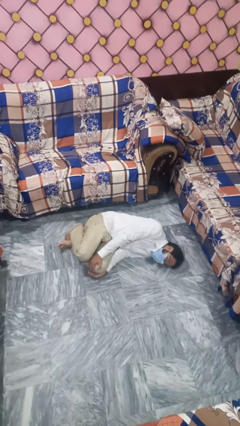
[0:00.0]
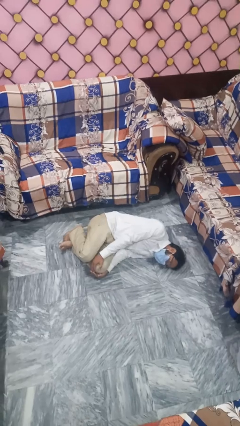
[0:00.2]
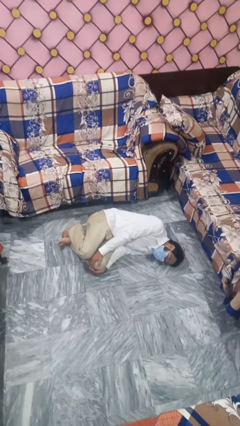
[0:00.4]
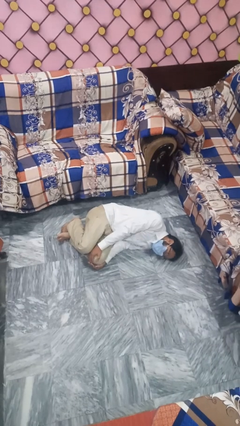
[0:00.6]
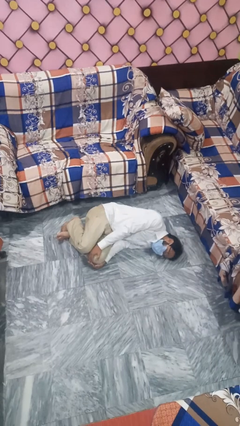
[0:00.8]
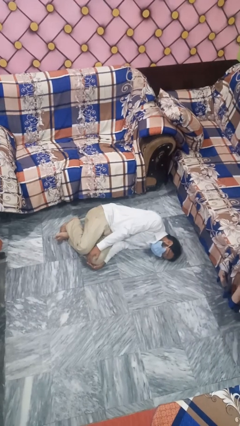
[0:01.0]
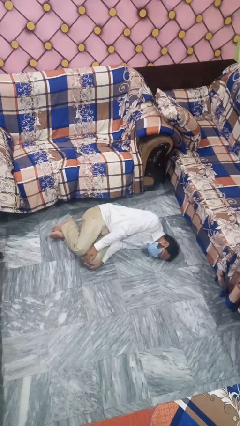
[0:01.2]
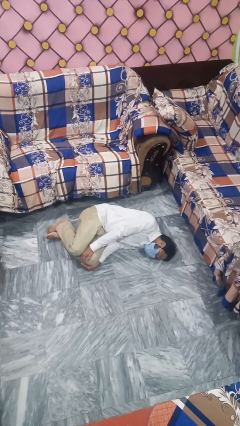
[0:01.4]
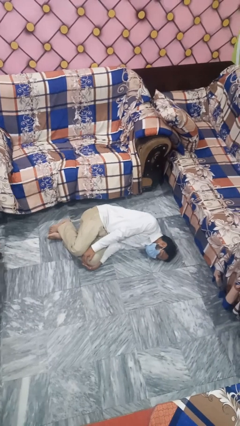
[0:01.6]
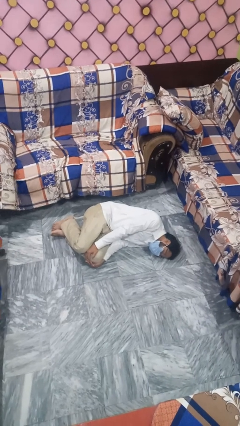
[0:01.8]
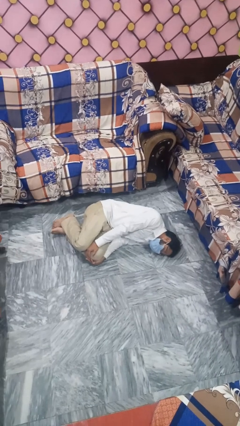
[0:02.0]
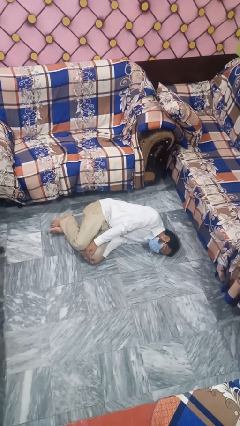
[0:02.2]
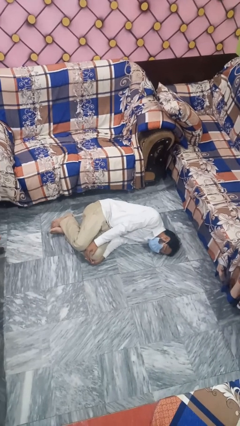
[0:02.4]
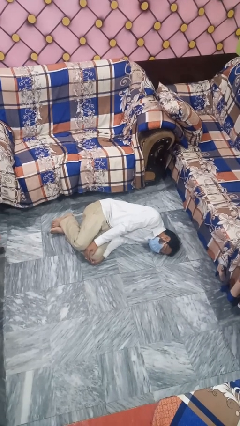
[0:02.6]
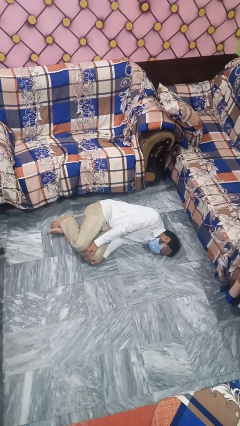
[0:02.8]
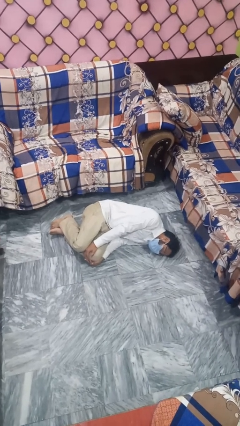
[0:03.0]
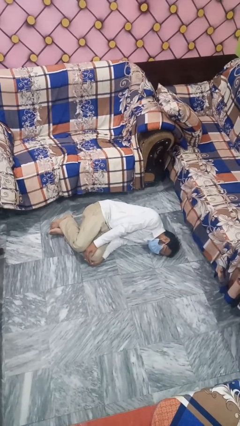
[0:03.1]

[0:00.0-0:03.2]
person lies down on floor

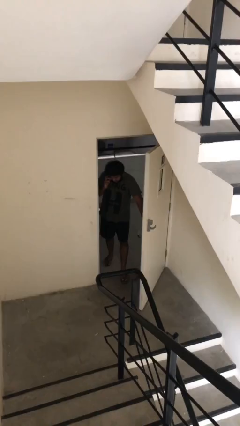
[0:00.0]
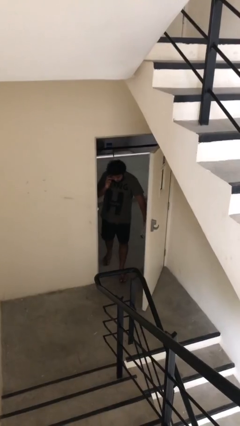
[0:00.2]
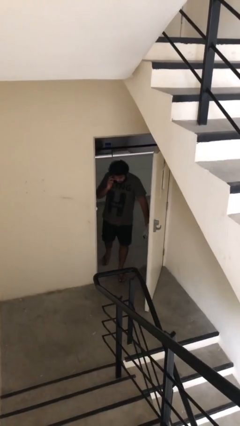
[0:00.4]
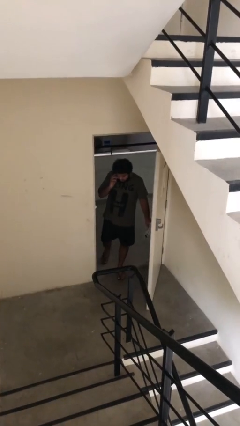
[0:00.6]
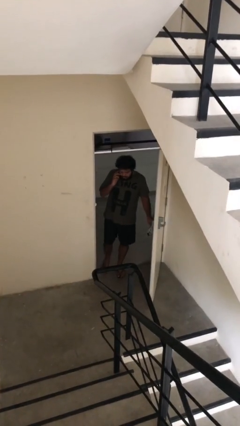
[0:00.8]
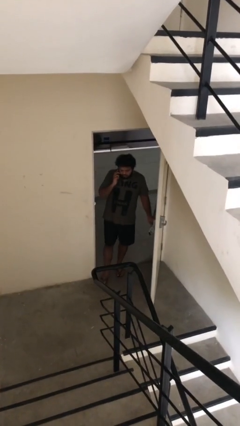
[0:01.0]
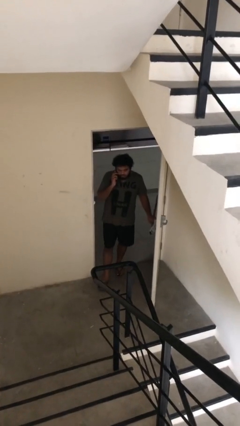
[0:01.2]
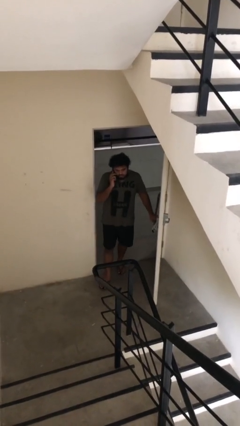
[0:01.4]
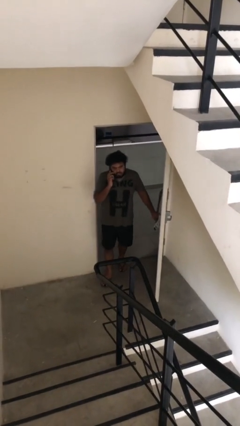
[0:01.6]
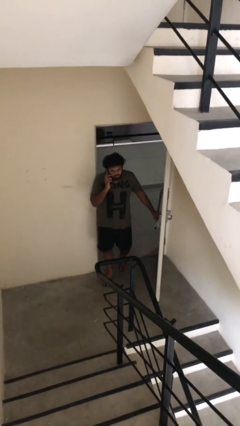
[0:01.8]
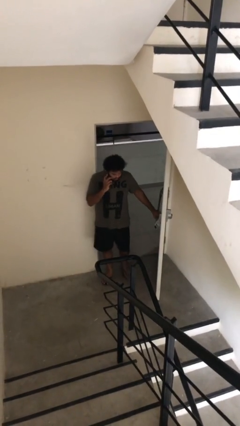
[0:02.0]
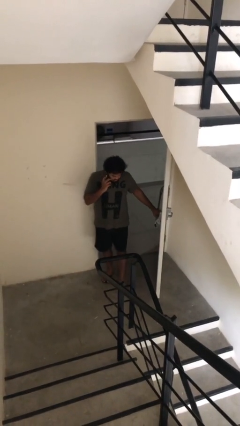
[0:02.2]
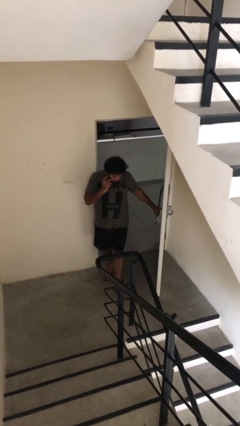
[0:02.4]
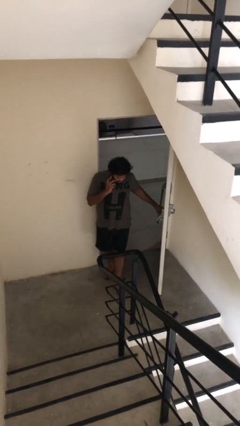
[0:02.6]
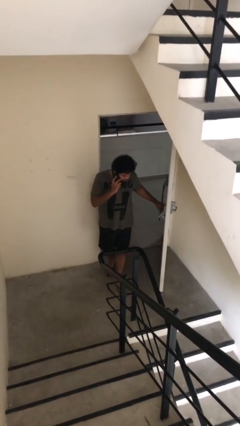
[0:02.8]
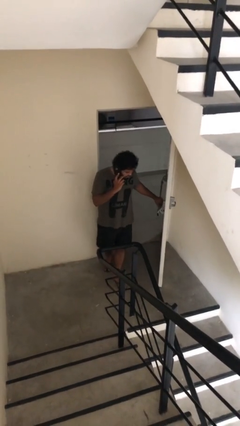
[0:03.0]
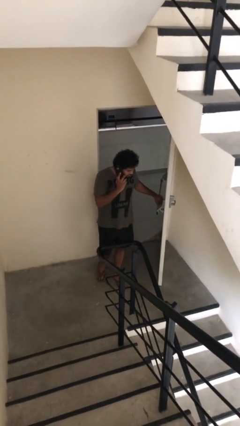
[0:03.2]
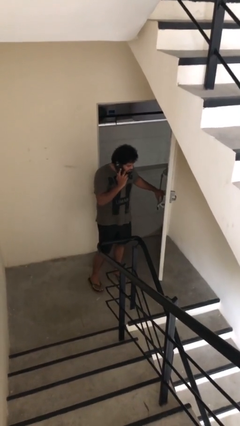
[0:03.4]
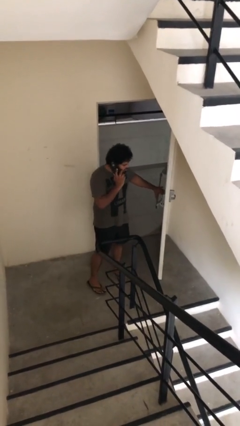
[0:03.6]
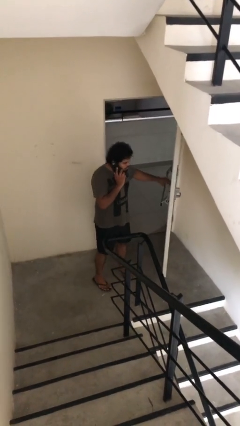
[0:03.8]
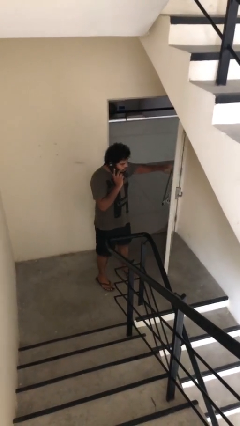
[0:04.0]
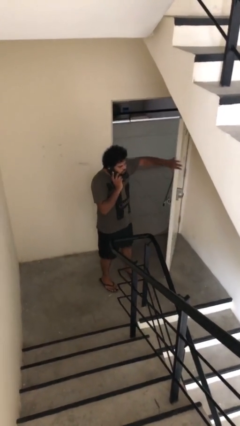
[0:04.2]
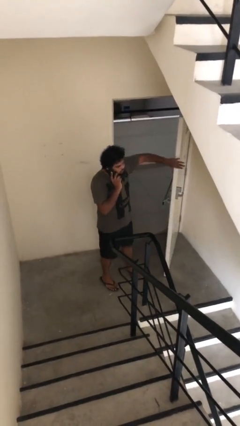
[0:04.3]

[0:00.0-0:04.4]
person enters scene through structure

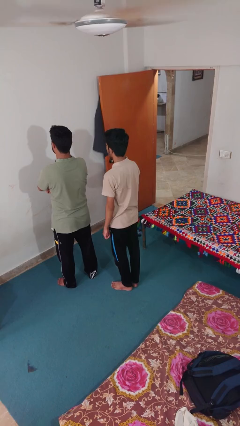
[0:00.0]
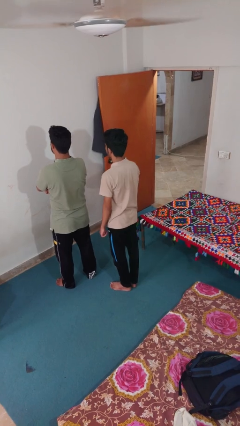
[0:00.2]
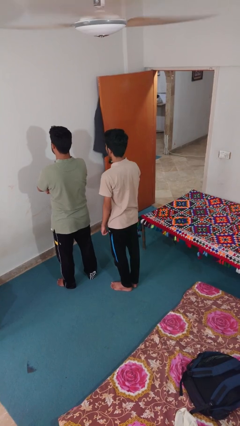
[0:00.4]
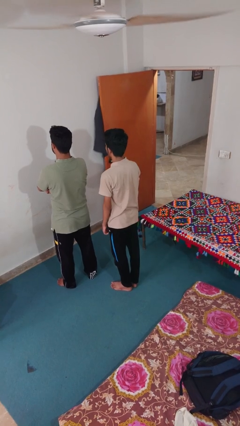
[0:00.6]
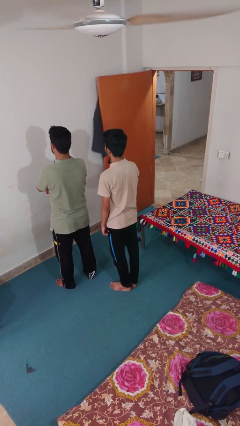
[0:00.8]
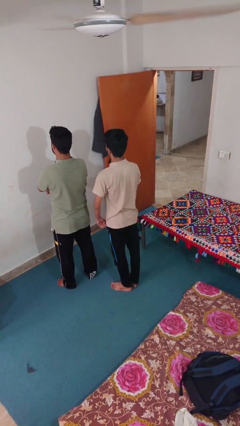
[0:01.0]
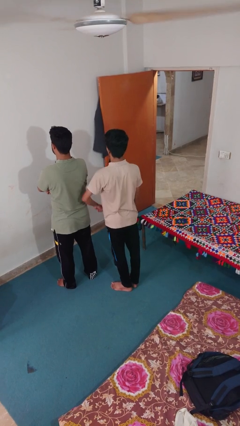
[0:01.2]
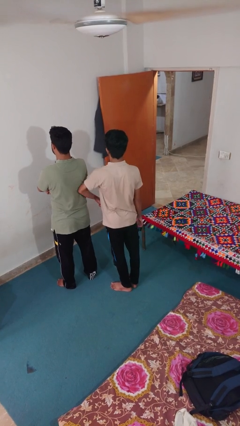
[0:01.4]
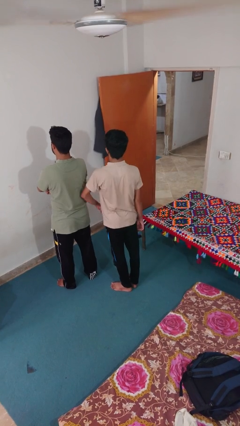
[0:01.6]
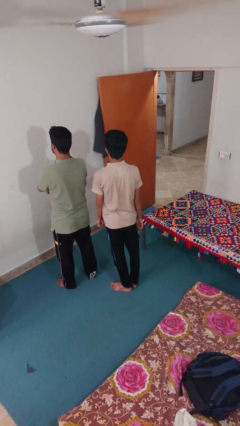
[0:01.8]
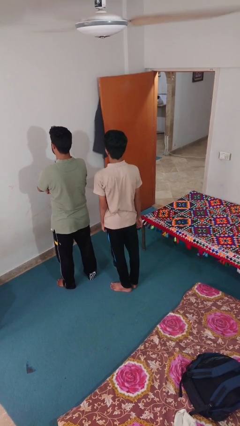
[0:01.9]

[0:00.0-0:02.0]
person nudges person with elbow

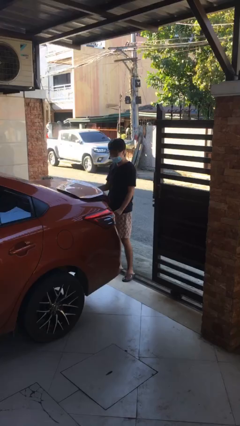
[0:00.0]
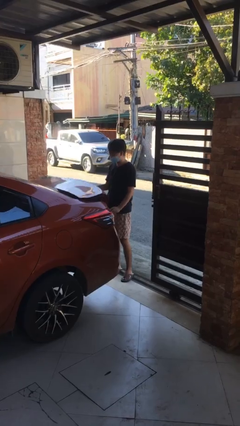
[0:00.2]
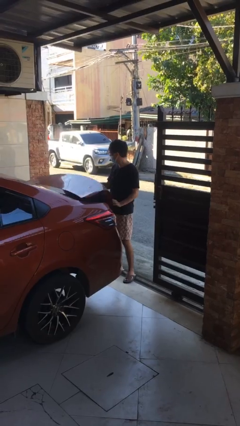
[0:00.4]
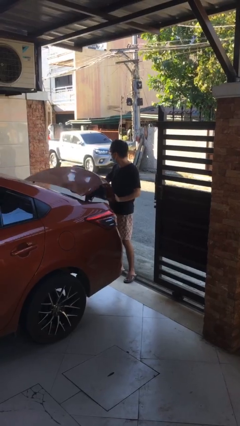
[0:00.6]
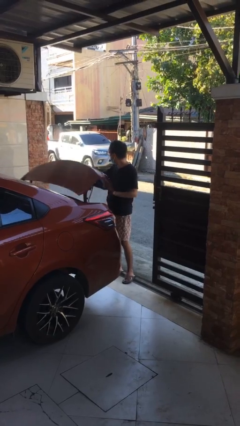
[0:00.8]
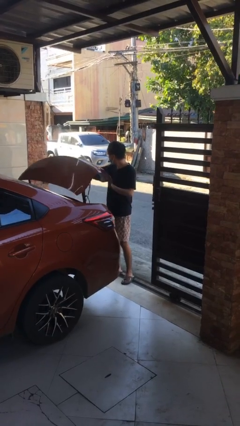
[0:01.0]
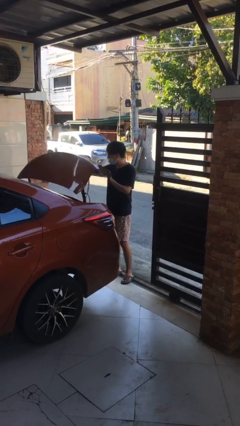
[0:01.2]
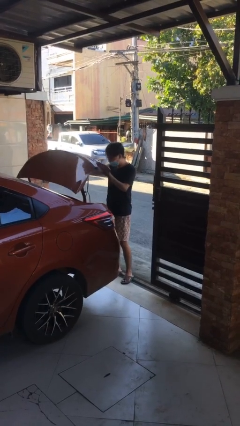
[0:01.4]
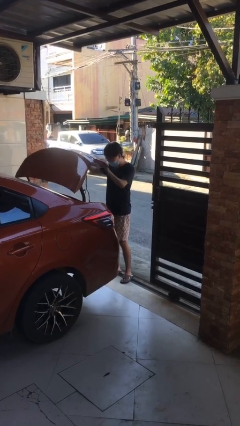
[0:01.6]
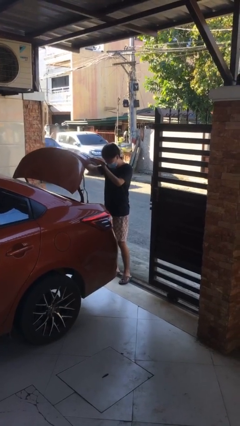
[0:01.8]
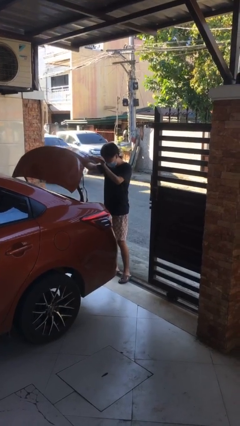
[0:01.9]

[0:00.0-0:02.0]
person opens car trunk

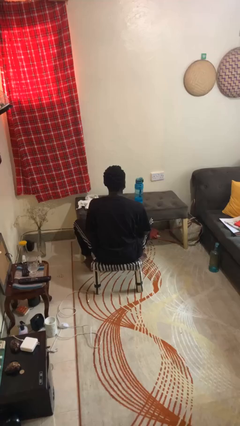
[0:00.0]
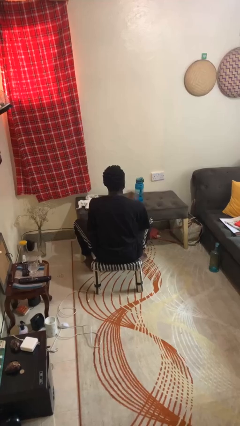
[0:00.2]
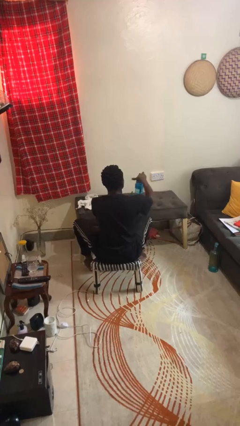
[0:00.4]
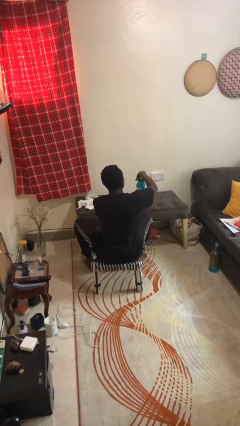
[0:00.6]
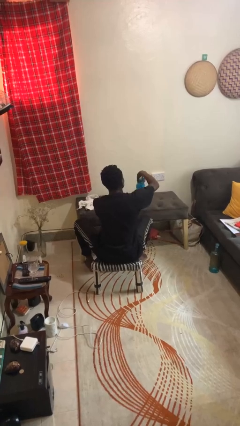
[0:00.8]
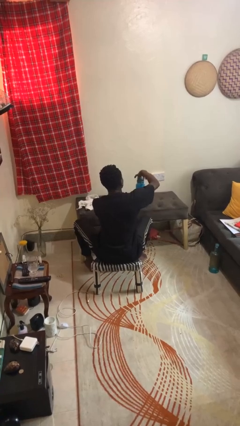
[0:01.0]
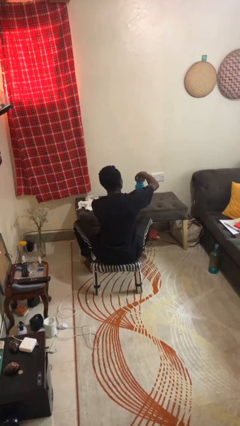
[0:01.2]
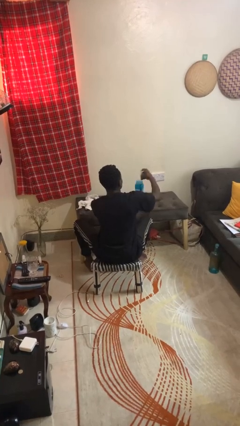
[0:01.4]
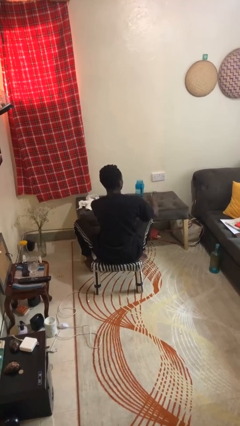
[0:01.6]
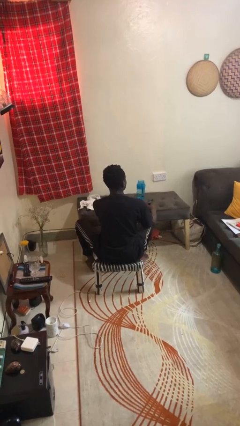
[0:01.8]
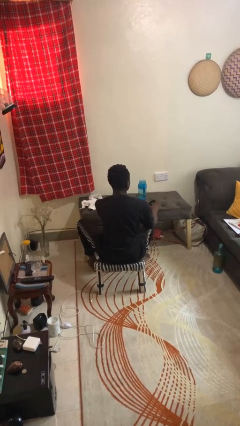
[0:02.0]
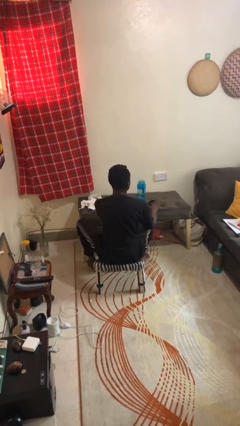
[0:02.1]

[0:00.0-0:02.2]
person opens jar

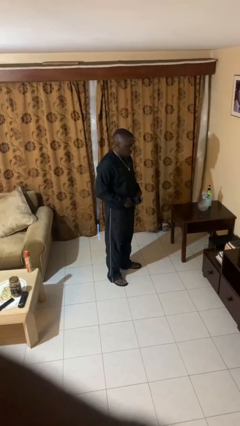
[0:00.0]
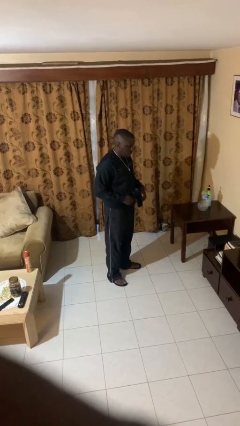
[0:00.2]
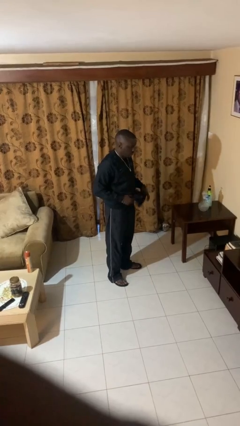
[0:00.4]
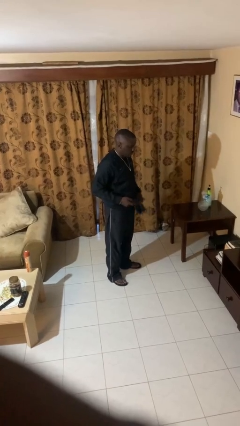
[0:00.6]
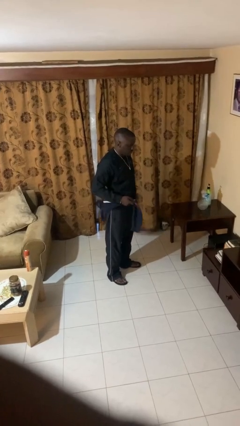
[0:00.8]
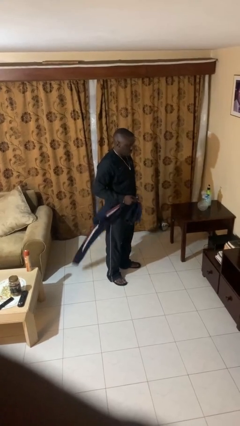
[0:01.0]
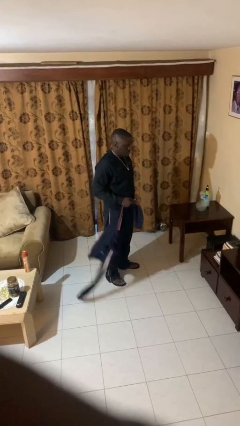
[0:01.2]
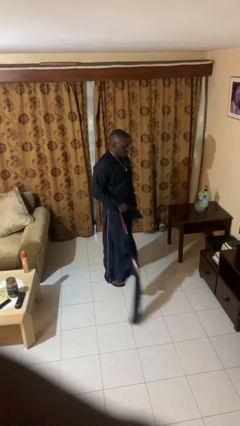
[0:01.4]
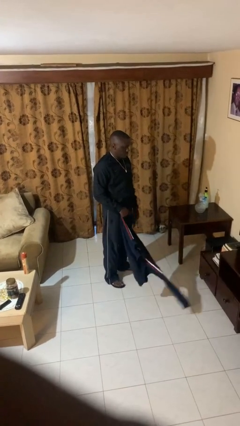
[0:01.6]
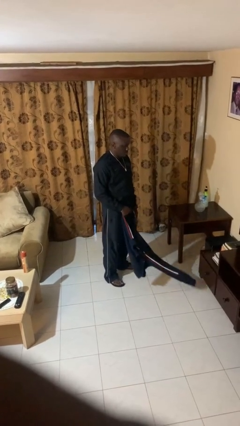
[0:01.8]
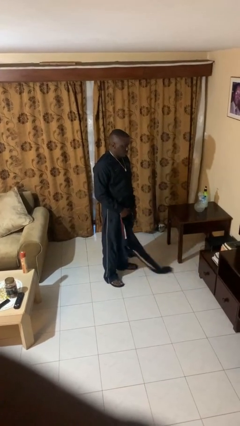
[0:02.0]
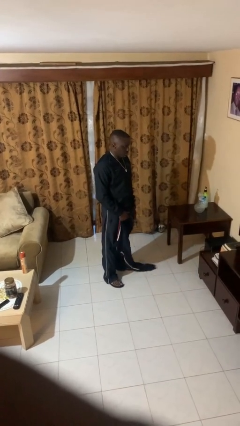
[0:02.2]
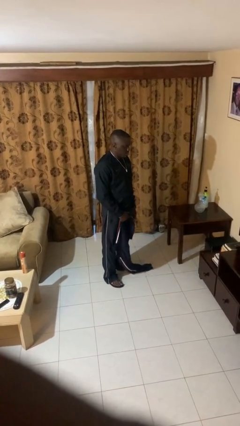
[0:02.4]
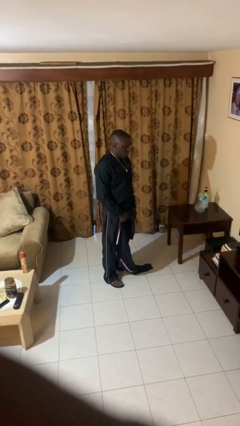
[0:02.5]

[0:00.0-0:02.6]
person unties jacket around waist

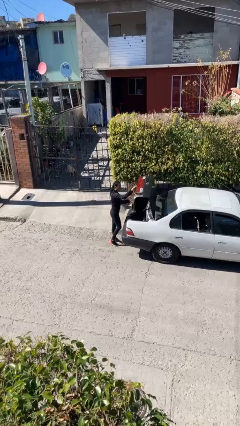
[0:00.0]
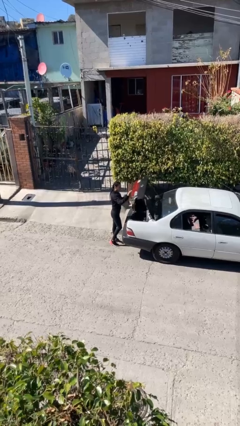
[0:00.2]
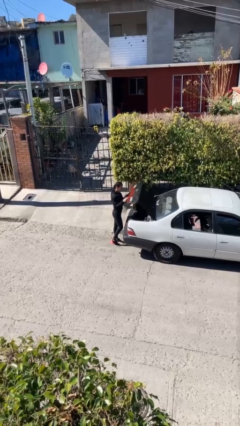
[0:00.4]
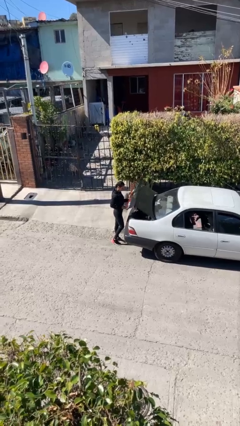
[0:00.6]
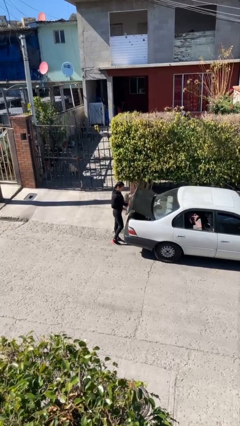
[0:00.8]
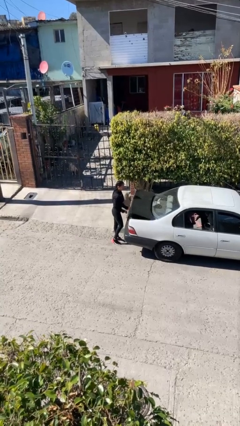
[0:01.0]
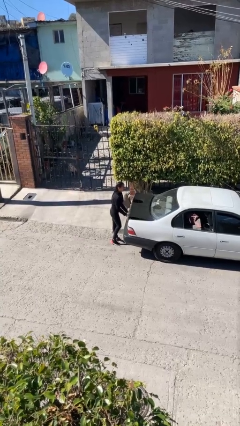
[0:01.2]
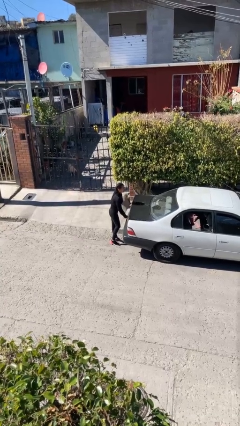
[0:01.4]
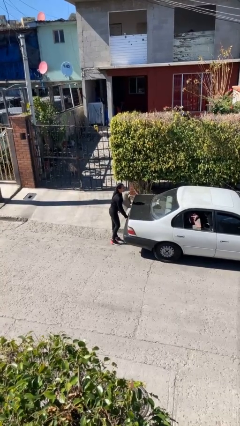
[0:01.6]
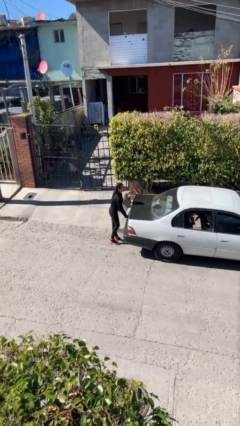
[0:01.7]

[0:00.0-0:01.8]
person closes car trunk
